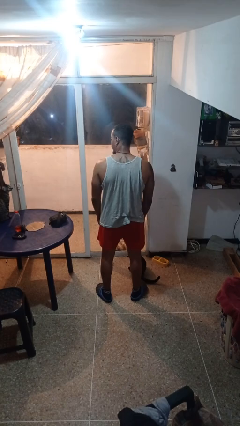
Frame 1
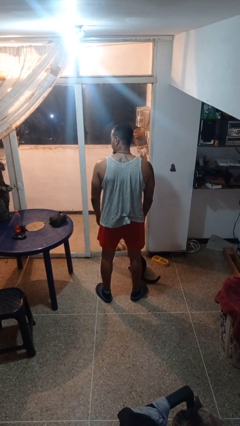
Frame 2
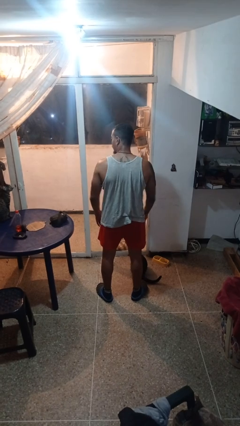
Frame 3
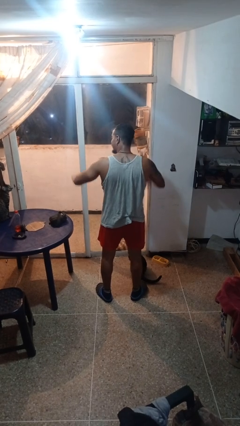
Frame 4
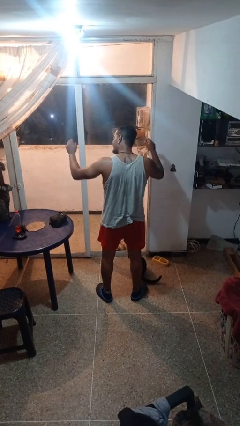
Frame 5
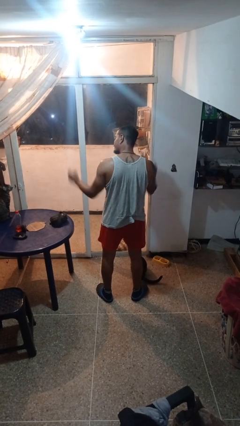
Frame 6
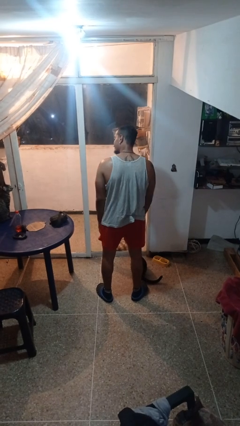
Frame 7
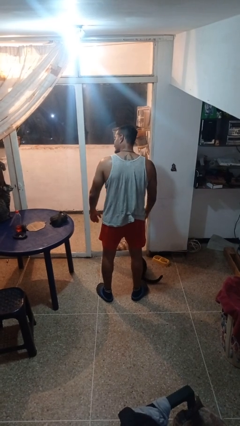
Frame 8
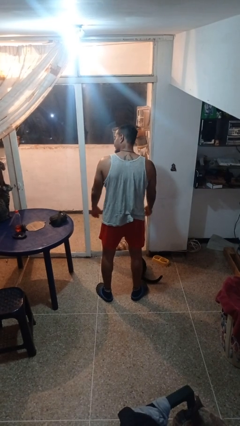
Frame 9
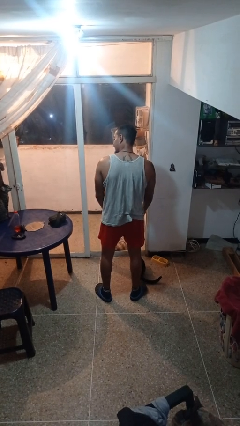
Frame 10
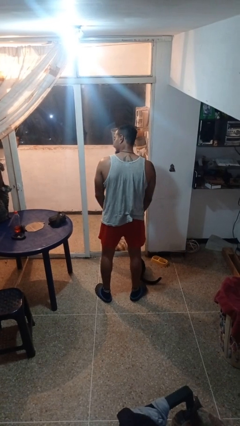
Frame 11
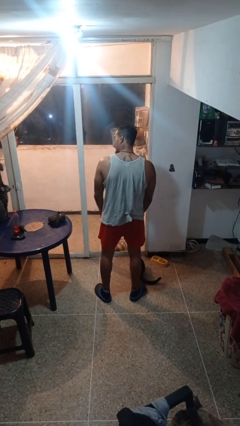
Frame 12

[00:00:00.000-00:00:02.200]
person slaps hands on thighs

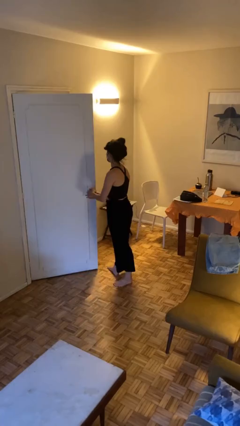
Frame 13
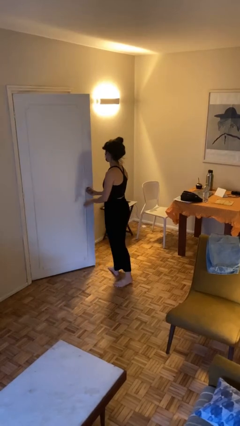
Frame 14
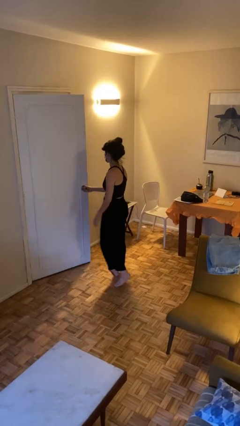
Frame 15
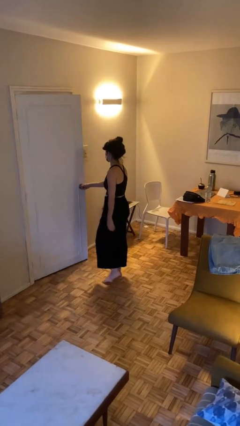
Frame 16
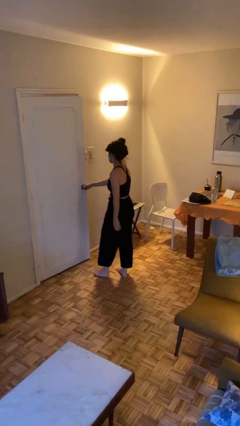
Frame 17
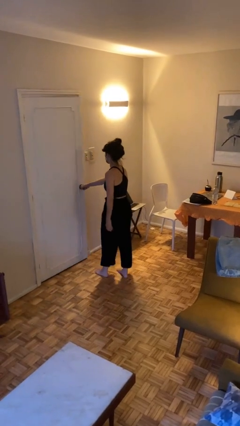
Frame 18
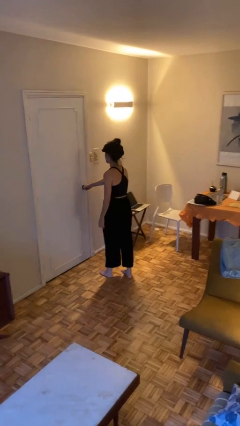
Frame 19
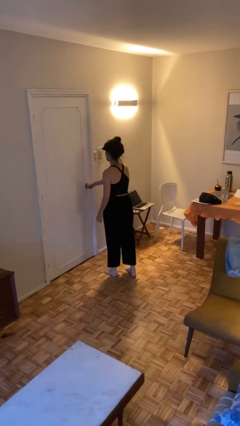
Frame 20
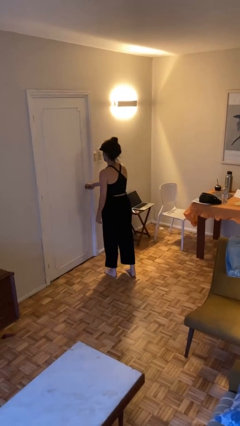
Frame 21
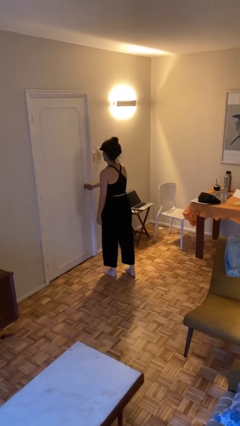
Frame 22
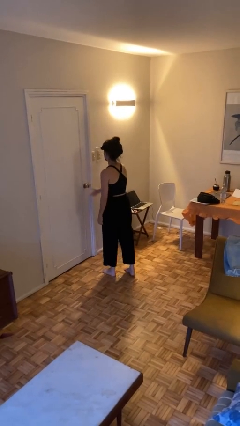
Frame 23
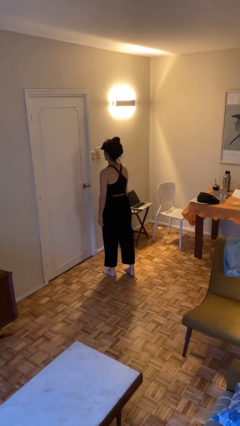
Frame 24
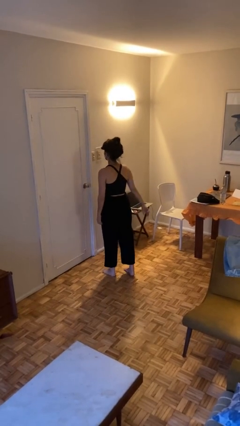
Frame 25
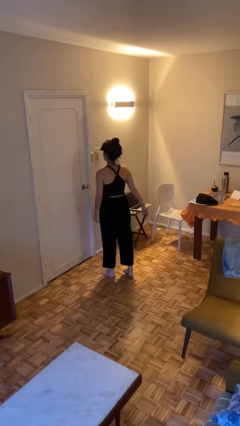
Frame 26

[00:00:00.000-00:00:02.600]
person closes facility door

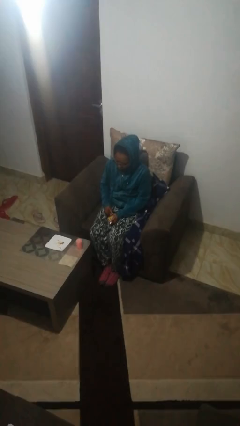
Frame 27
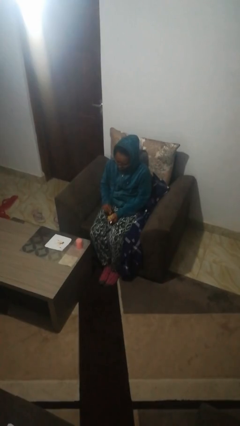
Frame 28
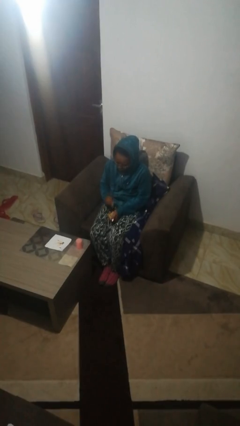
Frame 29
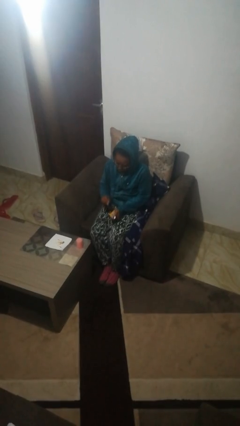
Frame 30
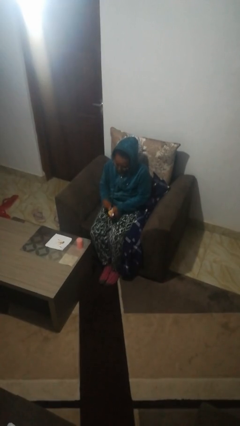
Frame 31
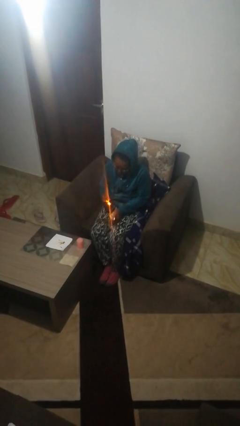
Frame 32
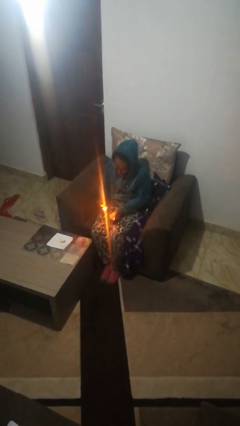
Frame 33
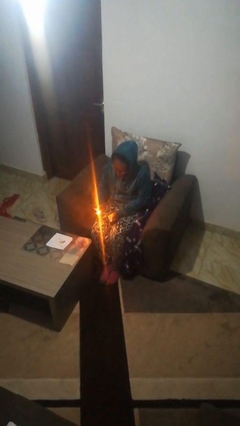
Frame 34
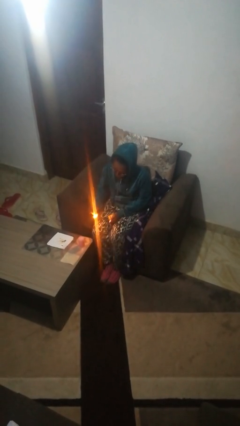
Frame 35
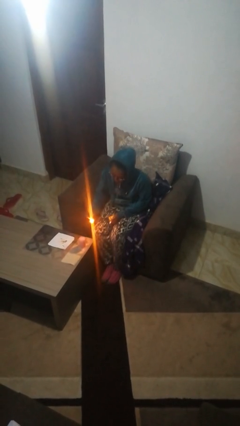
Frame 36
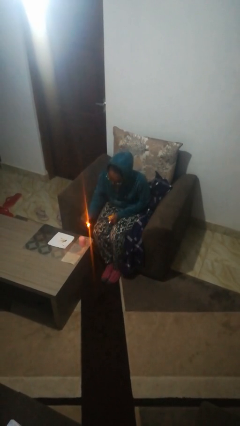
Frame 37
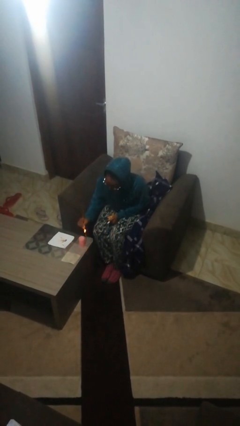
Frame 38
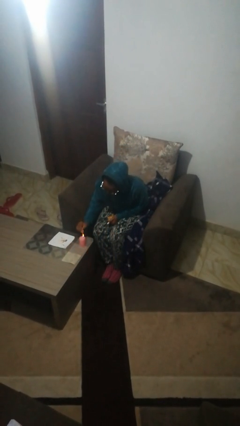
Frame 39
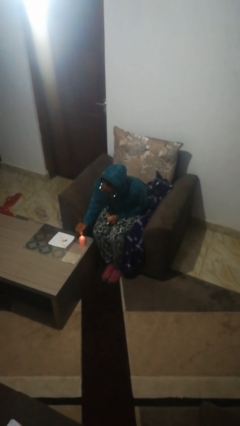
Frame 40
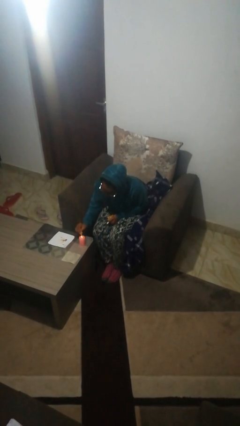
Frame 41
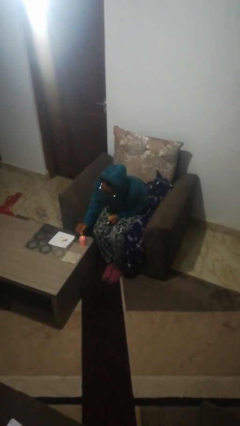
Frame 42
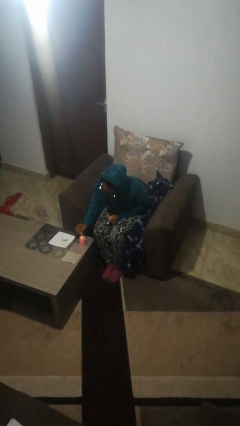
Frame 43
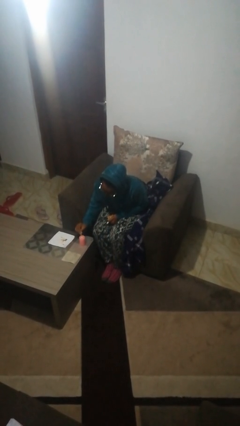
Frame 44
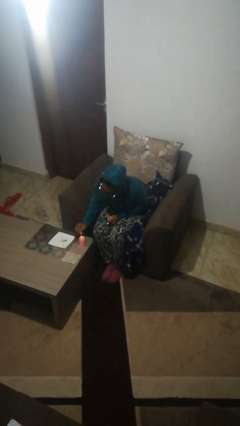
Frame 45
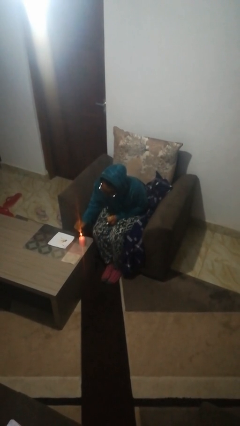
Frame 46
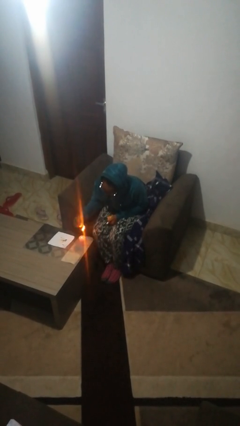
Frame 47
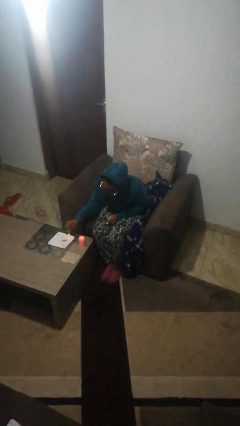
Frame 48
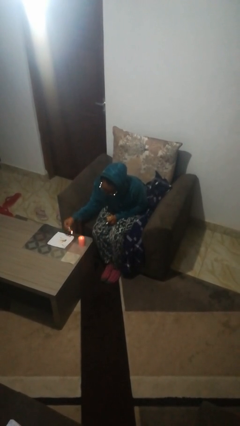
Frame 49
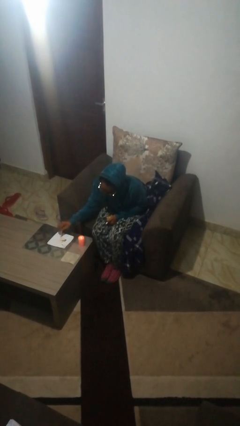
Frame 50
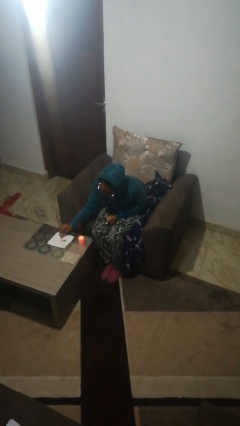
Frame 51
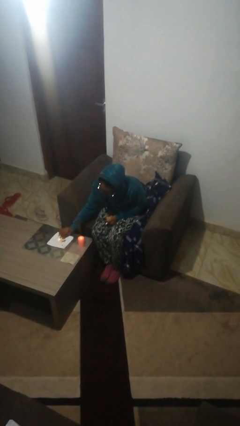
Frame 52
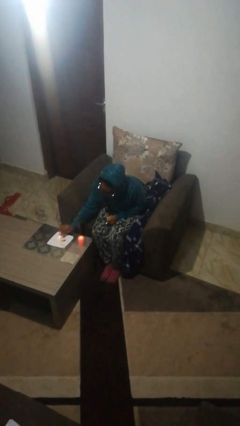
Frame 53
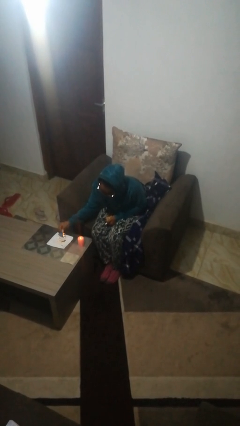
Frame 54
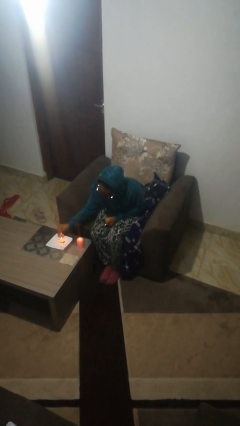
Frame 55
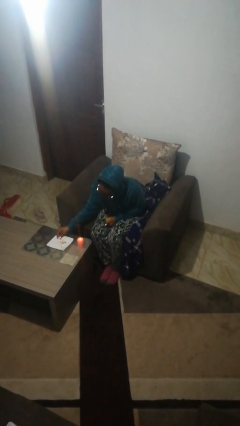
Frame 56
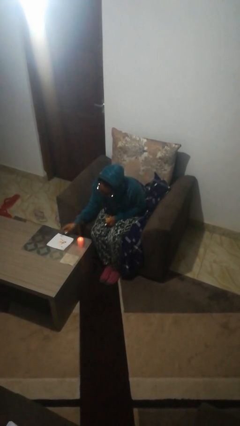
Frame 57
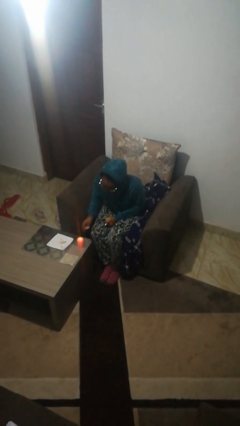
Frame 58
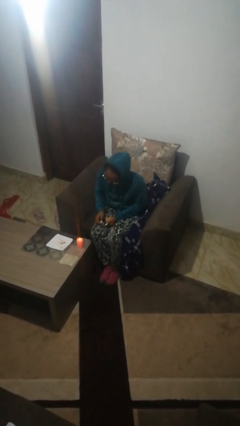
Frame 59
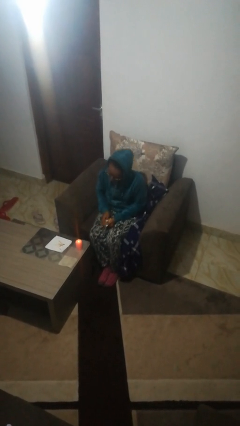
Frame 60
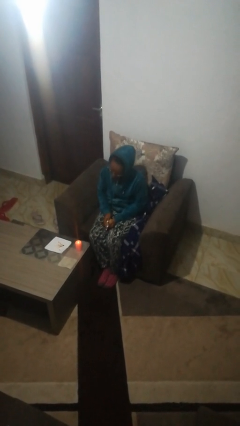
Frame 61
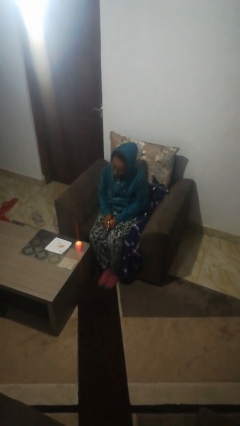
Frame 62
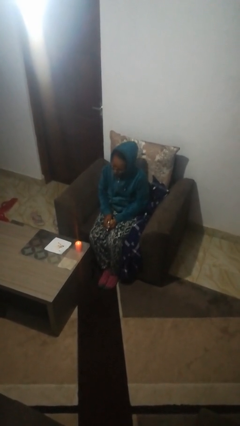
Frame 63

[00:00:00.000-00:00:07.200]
person lights candle

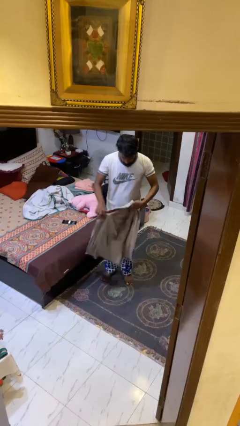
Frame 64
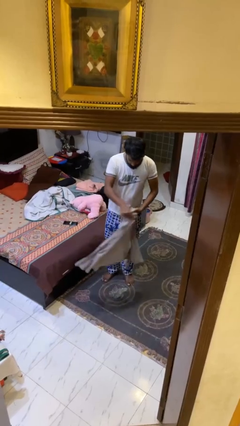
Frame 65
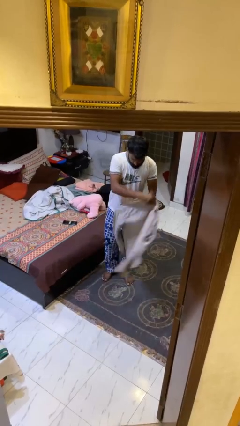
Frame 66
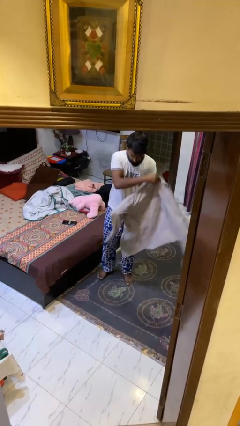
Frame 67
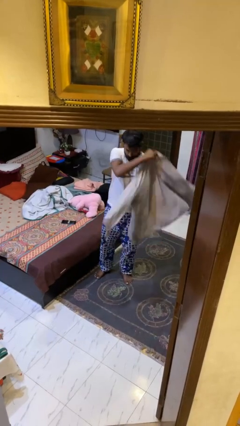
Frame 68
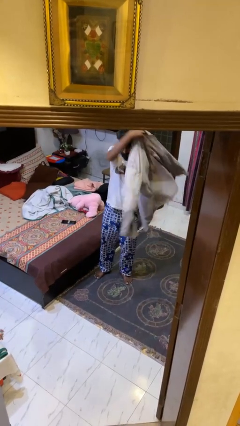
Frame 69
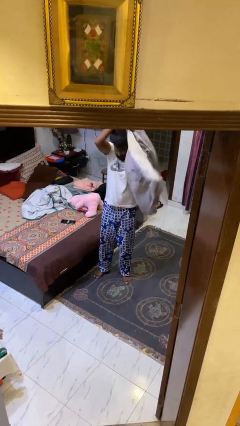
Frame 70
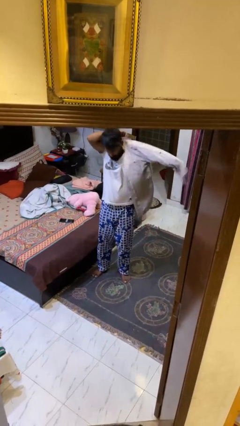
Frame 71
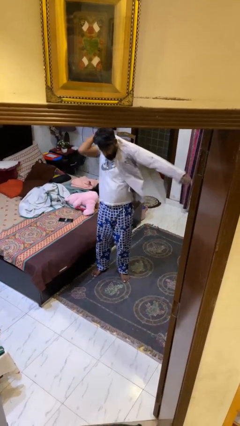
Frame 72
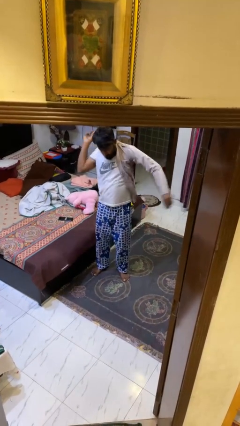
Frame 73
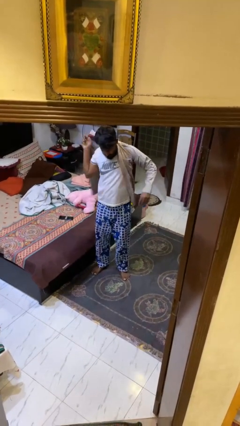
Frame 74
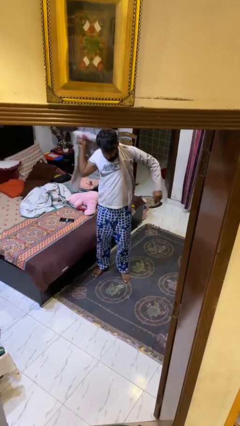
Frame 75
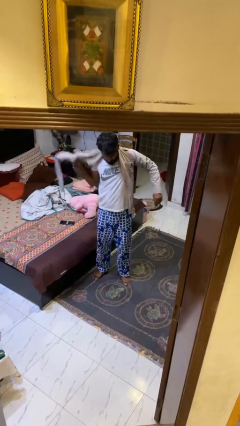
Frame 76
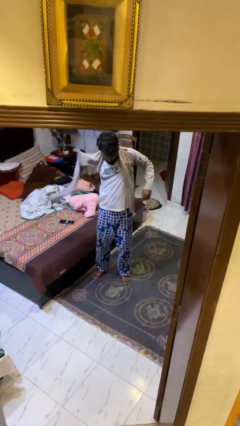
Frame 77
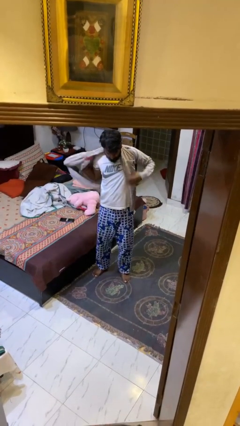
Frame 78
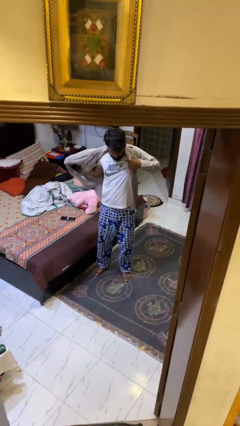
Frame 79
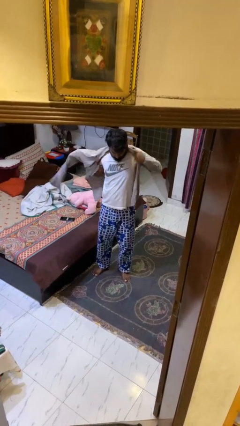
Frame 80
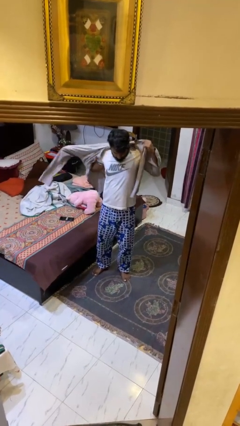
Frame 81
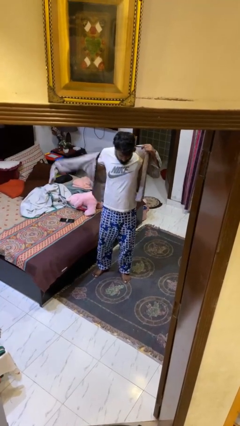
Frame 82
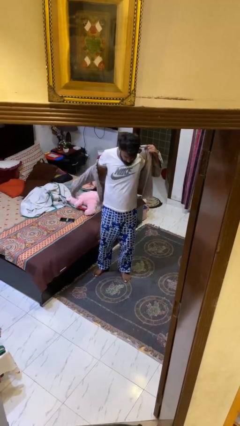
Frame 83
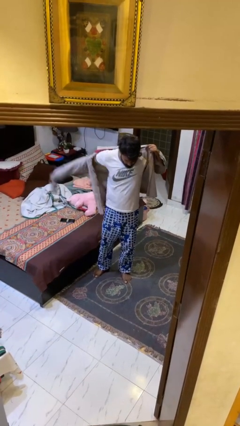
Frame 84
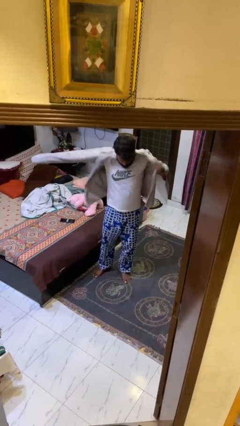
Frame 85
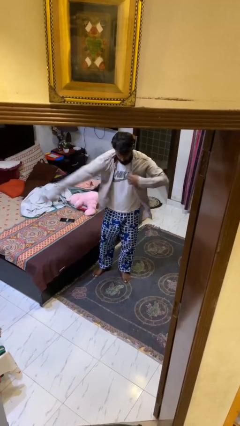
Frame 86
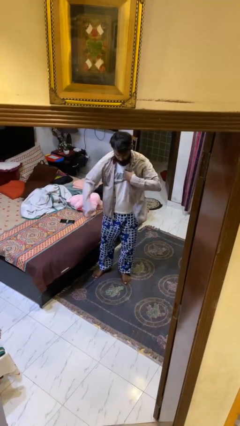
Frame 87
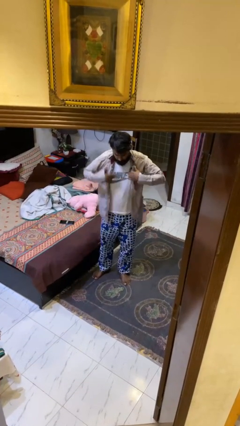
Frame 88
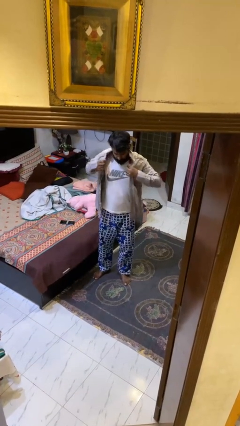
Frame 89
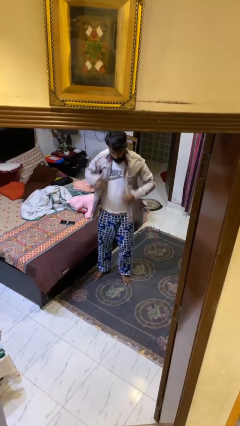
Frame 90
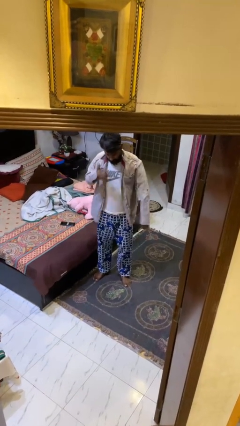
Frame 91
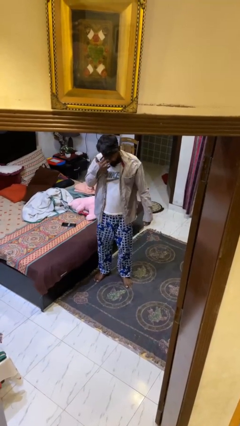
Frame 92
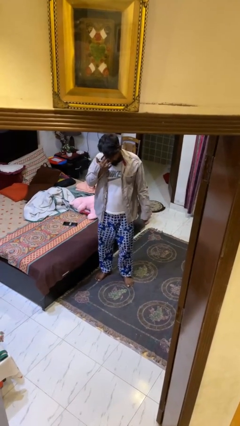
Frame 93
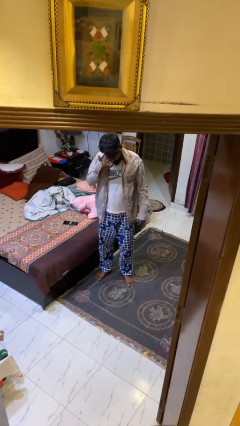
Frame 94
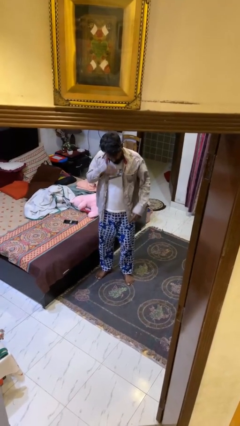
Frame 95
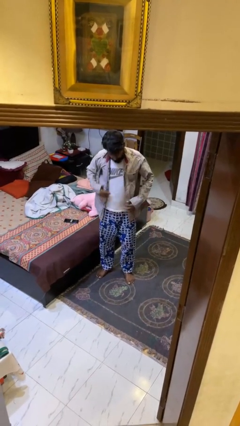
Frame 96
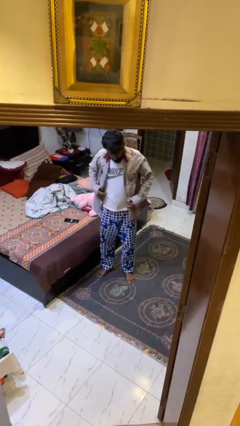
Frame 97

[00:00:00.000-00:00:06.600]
person puts on shirt
